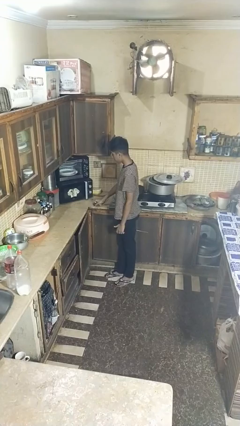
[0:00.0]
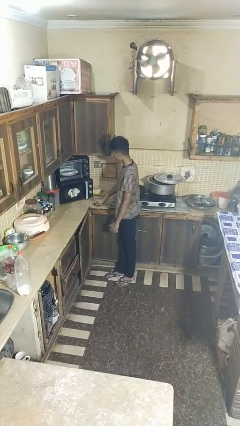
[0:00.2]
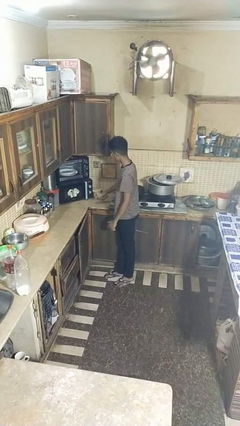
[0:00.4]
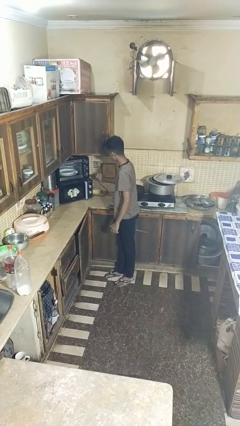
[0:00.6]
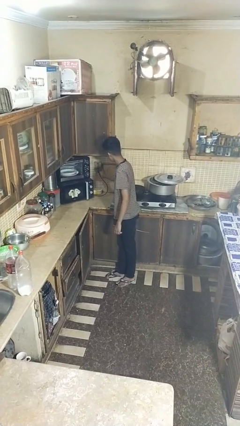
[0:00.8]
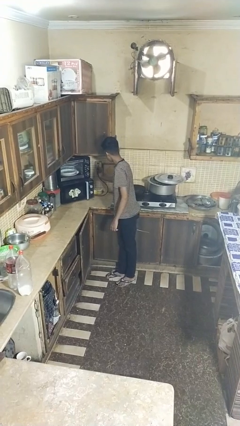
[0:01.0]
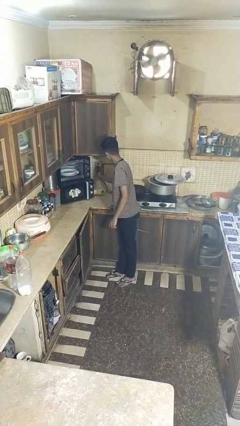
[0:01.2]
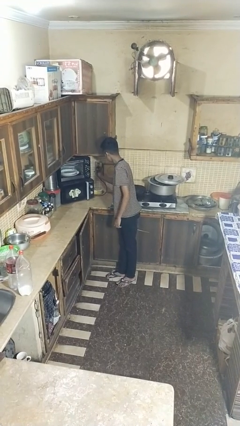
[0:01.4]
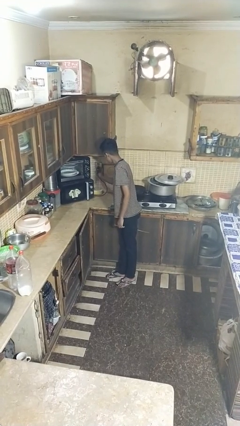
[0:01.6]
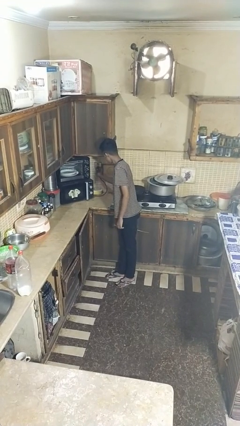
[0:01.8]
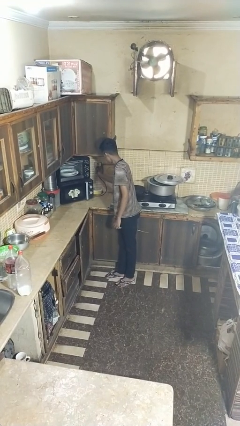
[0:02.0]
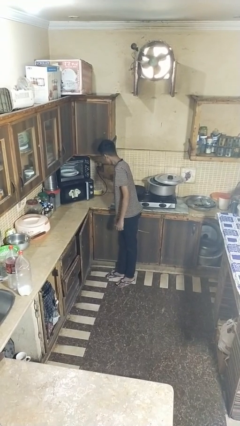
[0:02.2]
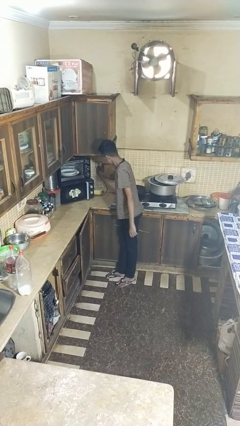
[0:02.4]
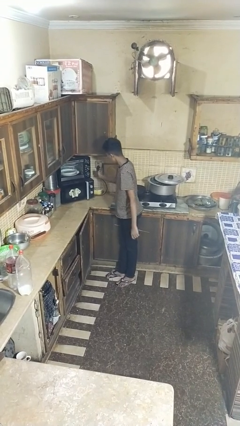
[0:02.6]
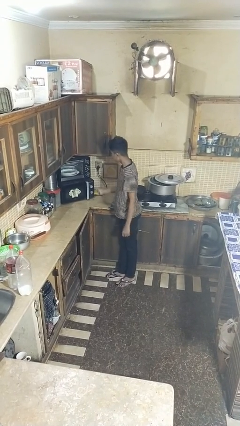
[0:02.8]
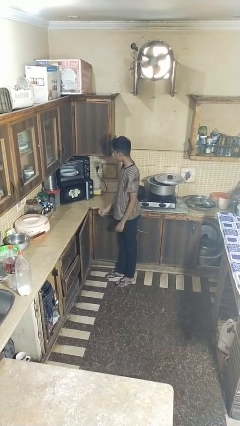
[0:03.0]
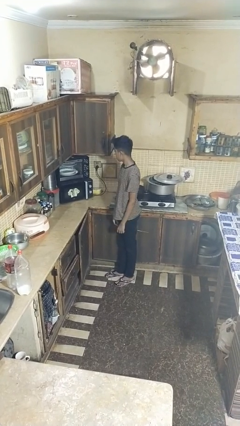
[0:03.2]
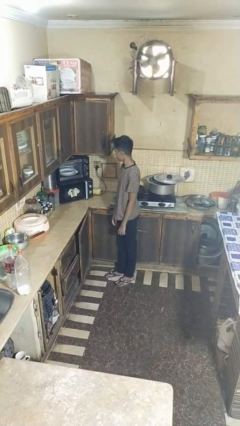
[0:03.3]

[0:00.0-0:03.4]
person plugs into electrical socket

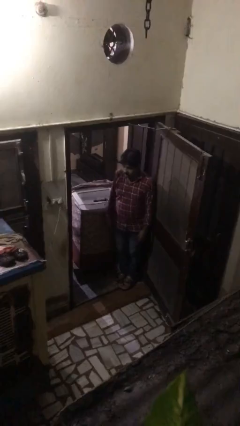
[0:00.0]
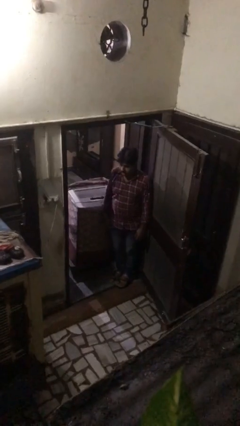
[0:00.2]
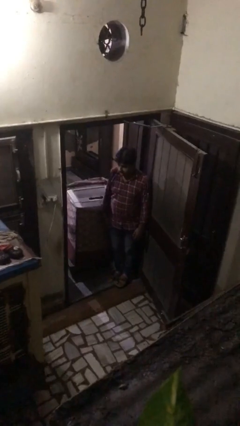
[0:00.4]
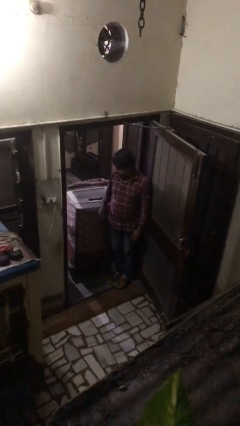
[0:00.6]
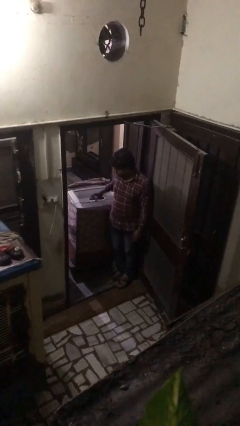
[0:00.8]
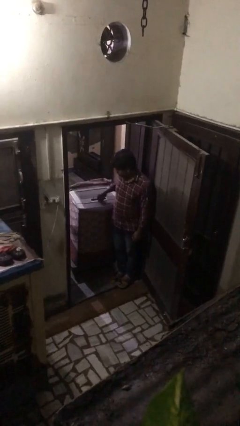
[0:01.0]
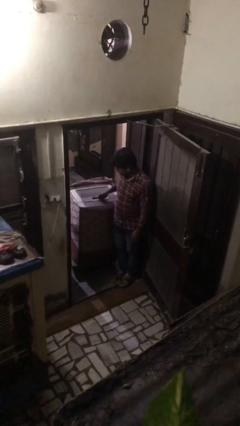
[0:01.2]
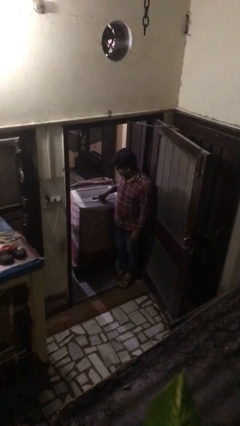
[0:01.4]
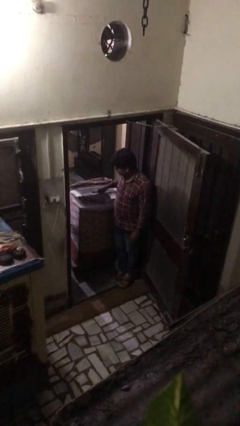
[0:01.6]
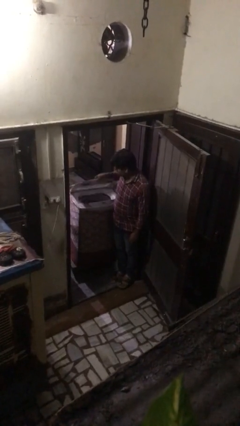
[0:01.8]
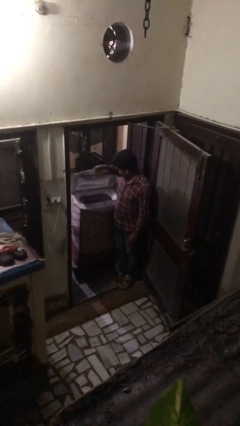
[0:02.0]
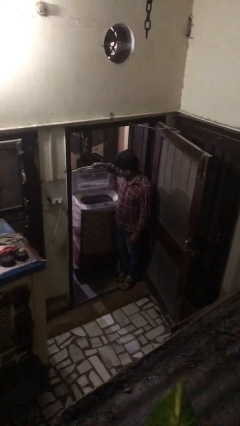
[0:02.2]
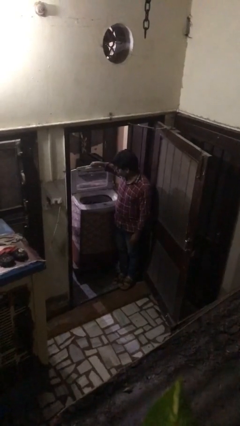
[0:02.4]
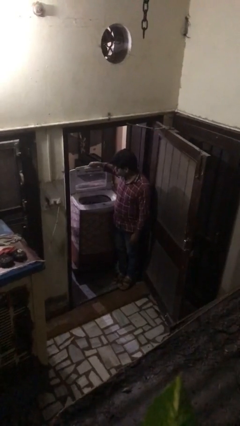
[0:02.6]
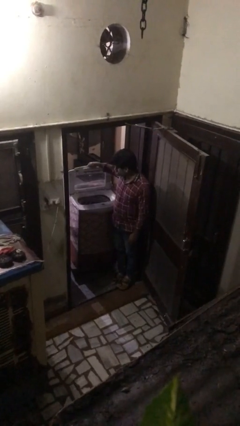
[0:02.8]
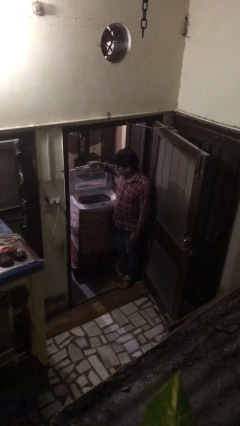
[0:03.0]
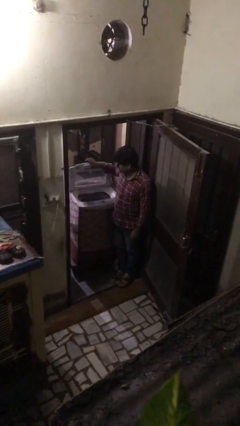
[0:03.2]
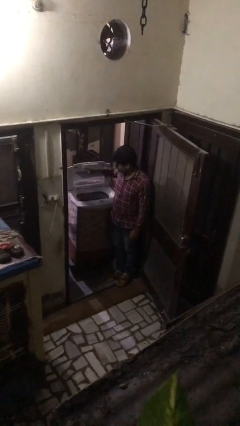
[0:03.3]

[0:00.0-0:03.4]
person opens clothes washer

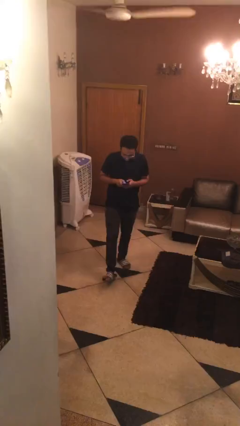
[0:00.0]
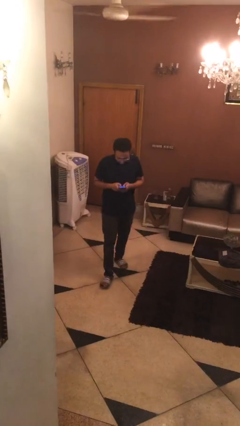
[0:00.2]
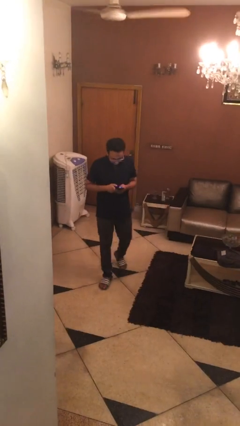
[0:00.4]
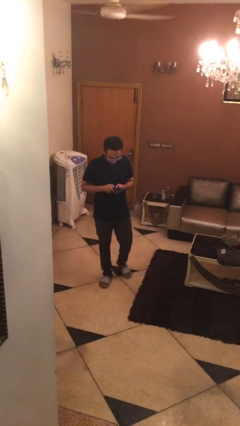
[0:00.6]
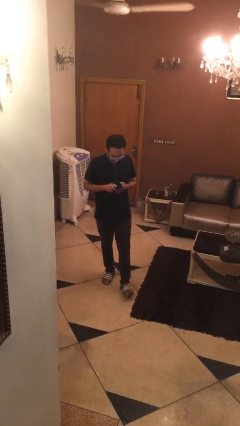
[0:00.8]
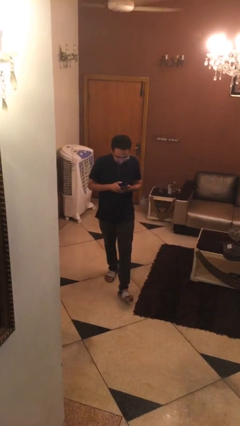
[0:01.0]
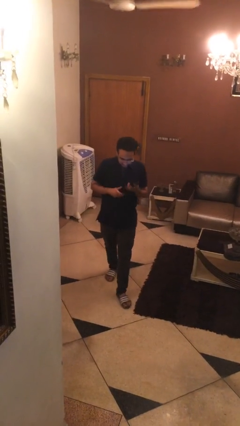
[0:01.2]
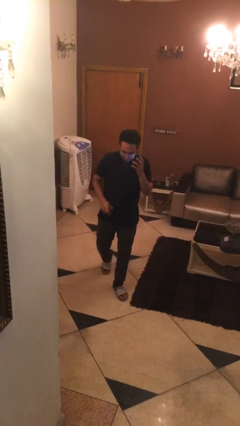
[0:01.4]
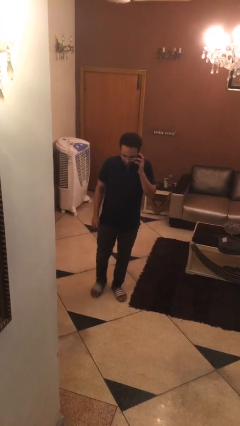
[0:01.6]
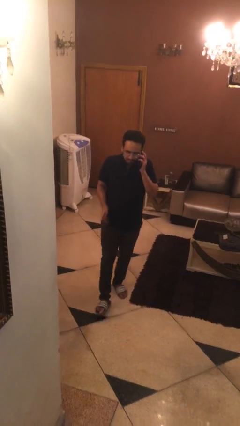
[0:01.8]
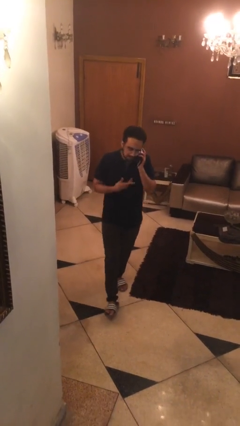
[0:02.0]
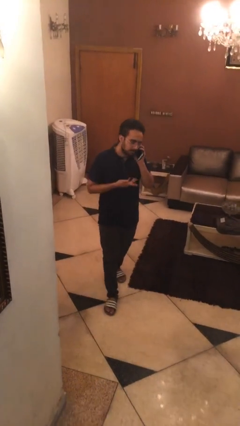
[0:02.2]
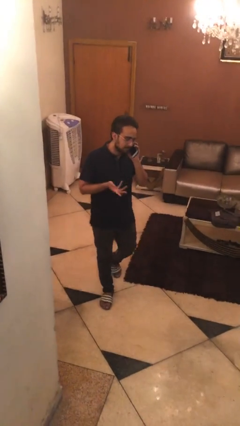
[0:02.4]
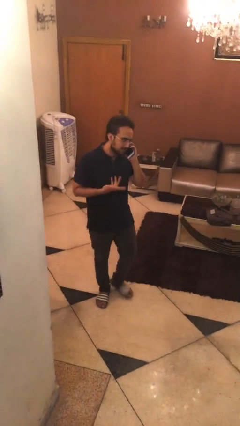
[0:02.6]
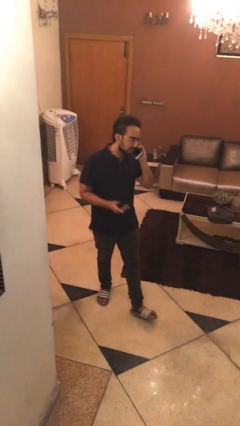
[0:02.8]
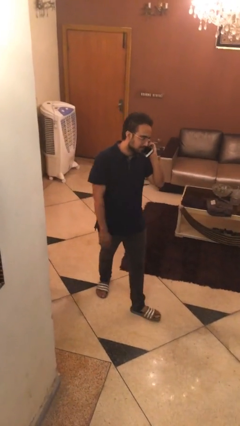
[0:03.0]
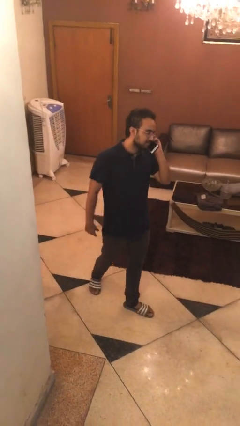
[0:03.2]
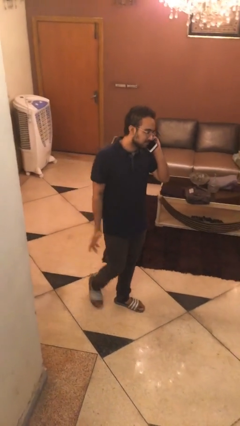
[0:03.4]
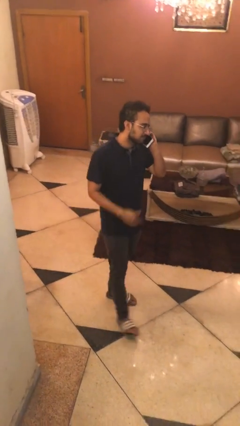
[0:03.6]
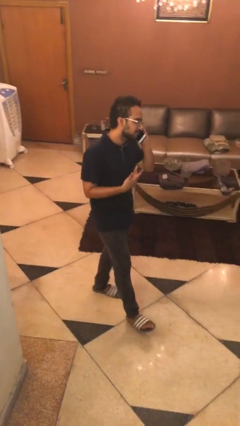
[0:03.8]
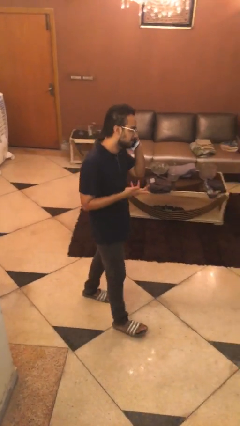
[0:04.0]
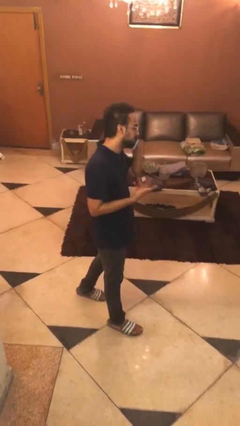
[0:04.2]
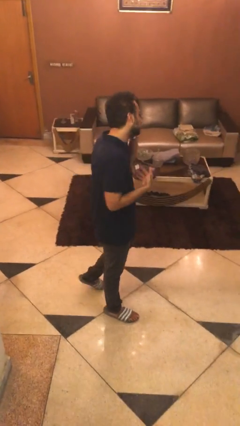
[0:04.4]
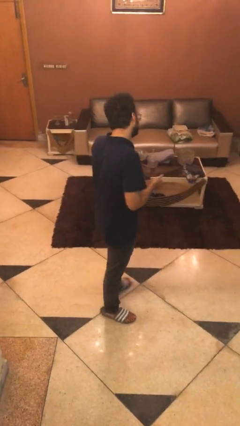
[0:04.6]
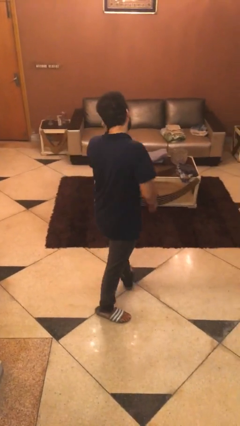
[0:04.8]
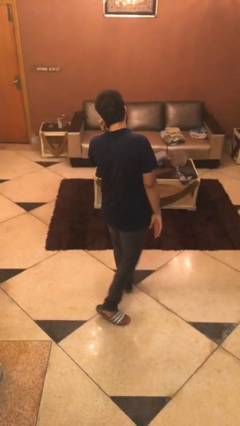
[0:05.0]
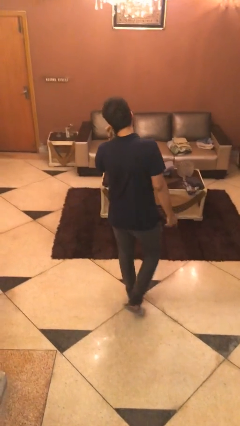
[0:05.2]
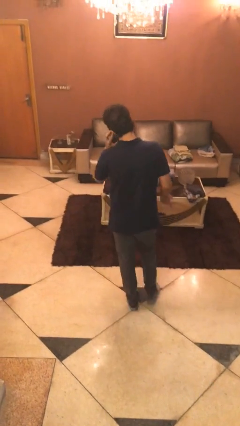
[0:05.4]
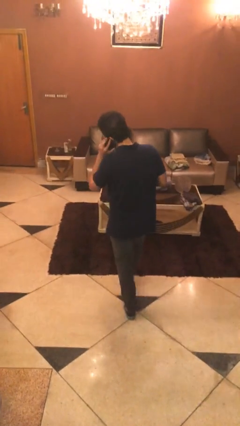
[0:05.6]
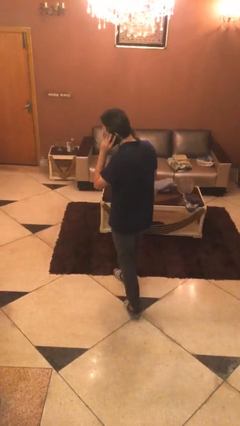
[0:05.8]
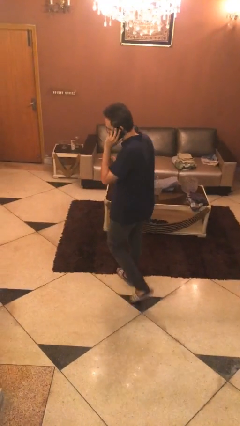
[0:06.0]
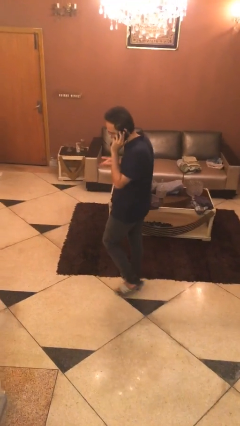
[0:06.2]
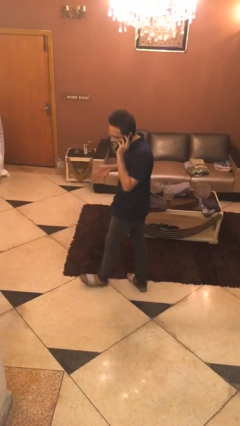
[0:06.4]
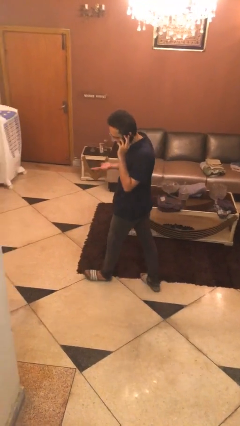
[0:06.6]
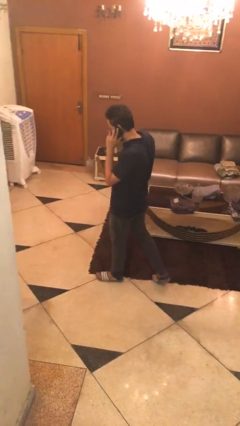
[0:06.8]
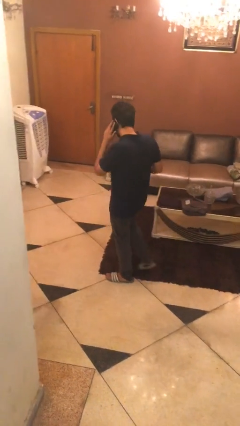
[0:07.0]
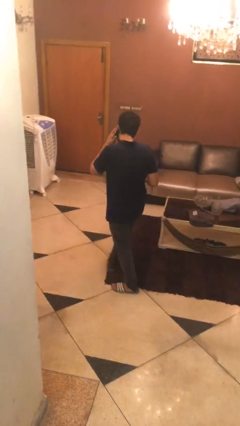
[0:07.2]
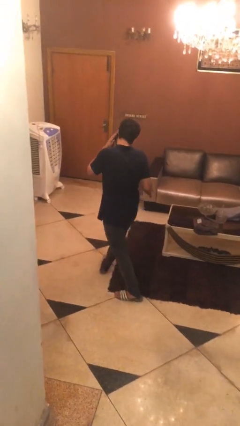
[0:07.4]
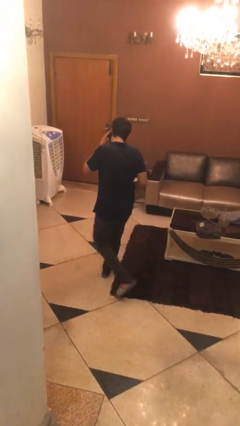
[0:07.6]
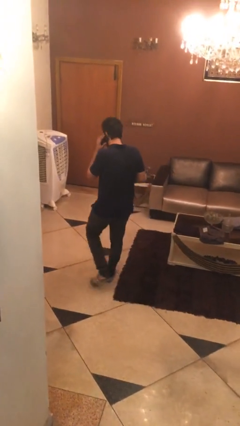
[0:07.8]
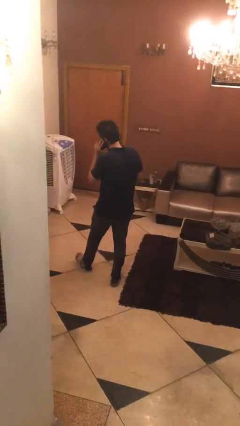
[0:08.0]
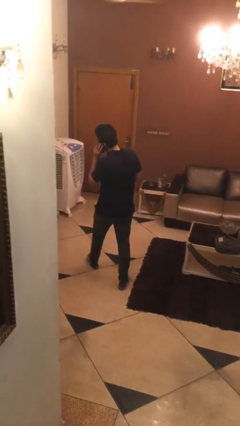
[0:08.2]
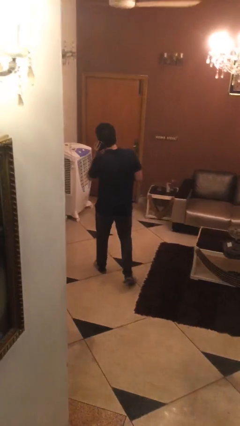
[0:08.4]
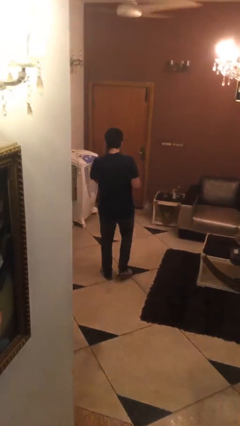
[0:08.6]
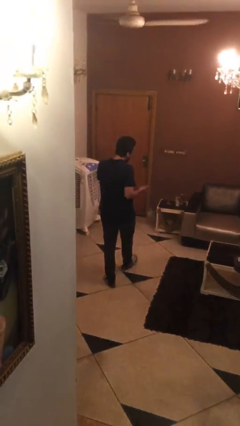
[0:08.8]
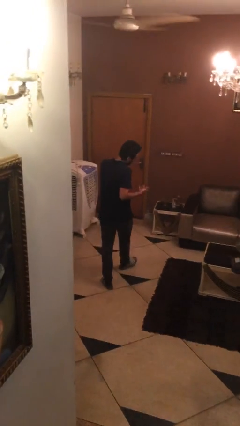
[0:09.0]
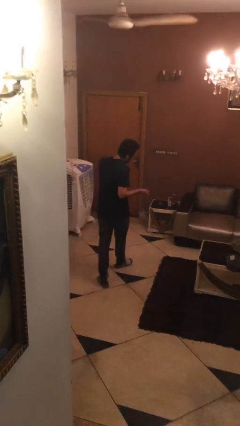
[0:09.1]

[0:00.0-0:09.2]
person talks on phone

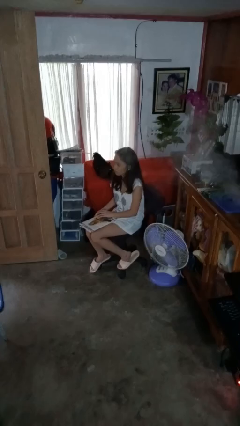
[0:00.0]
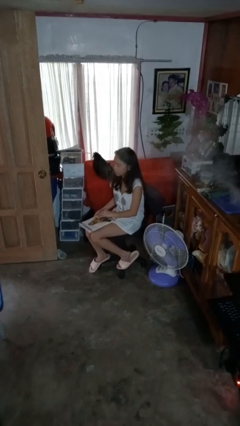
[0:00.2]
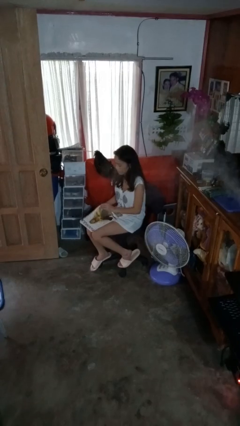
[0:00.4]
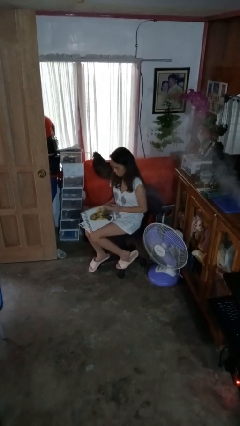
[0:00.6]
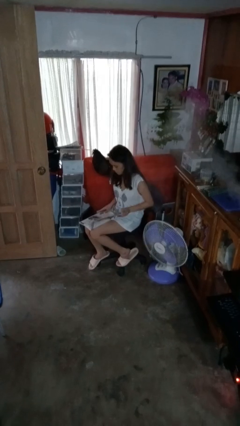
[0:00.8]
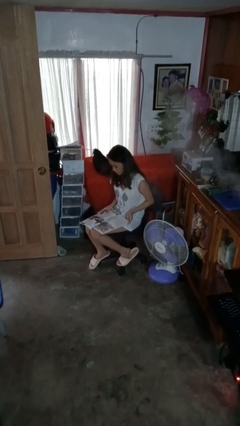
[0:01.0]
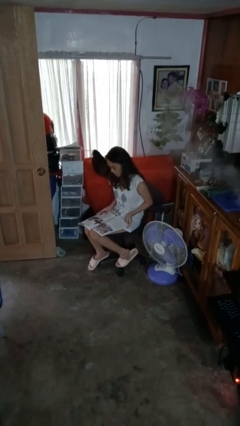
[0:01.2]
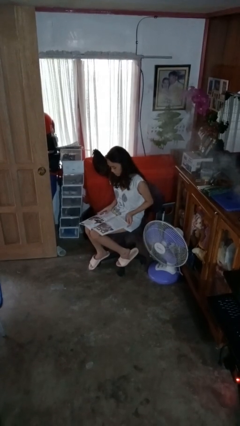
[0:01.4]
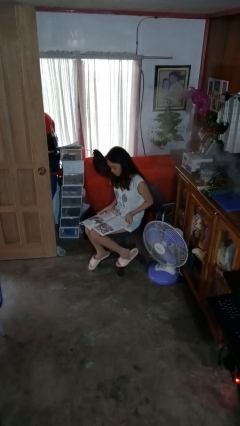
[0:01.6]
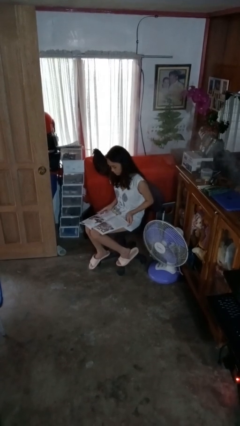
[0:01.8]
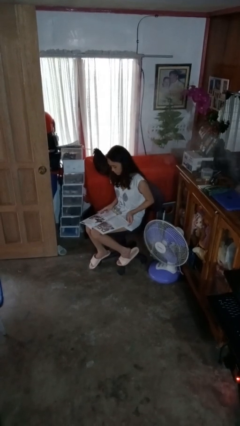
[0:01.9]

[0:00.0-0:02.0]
person reads magazine
